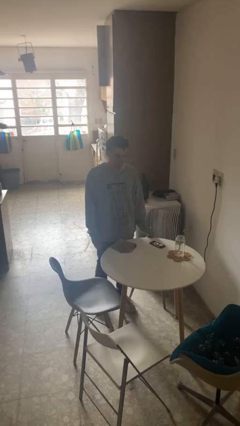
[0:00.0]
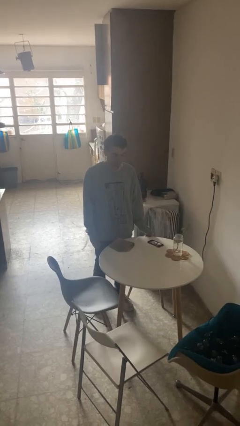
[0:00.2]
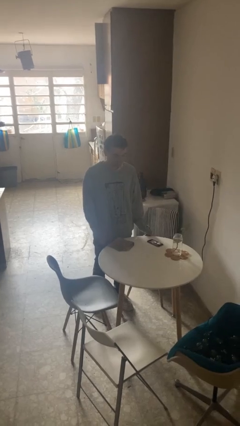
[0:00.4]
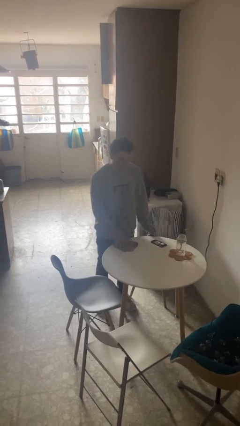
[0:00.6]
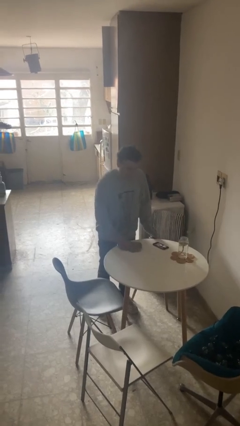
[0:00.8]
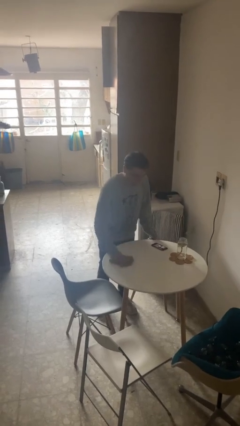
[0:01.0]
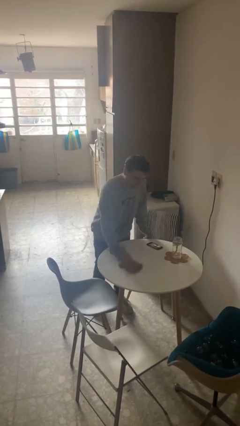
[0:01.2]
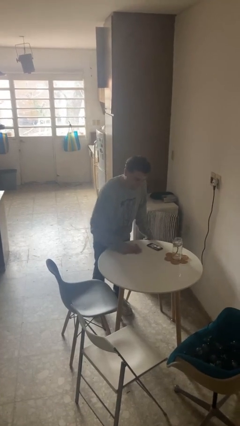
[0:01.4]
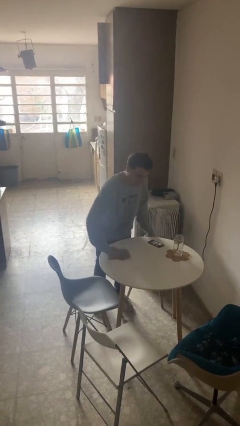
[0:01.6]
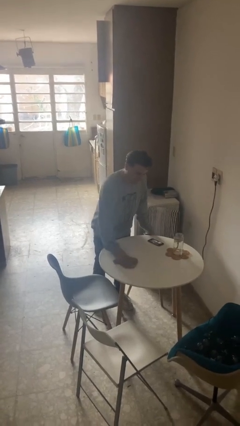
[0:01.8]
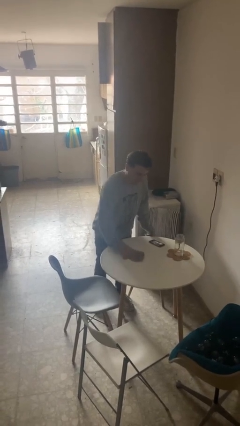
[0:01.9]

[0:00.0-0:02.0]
person cleans table with rag

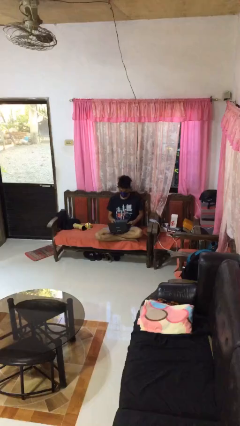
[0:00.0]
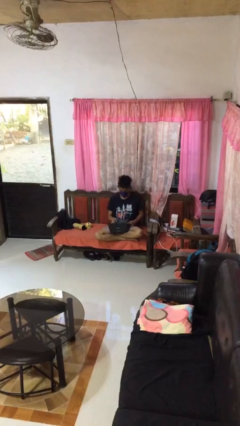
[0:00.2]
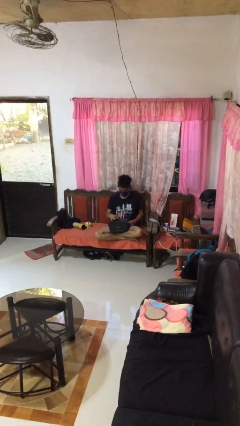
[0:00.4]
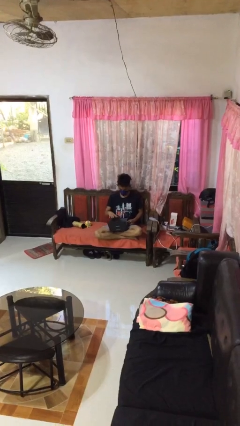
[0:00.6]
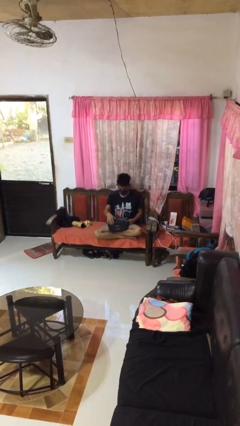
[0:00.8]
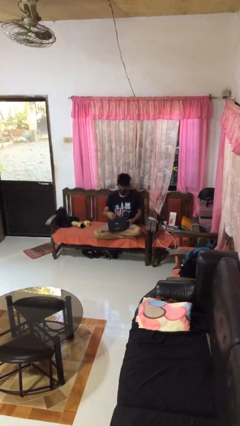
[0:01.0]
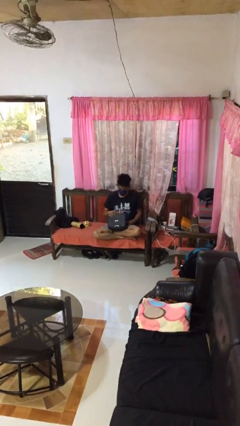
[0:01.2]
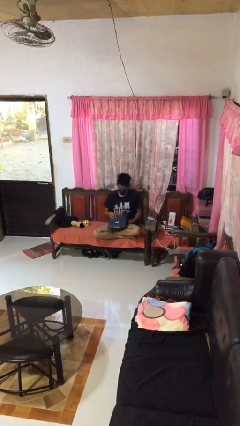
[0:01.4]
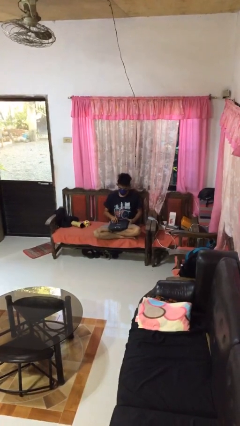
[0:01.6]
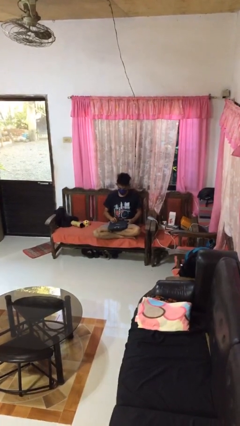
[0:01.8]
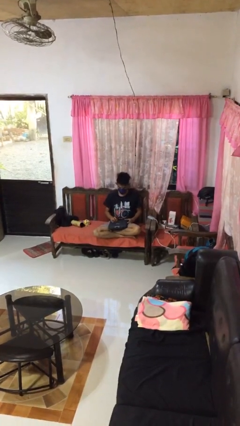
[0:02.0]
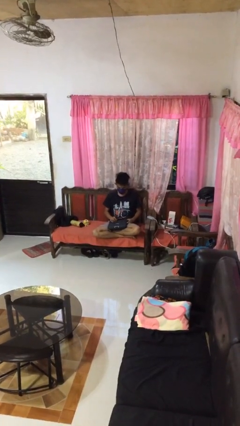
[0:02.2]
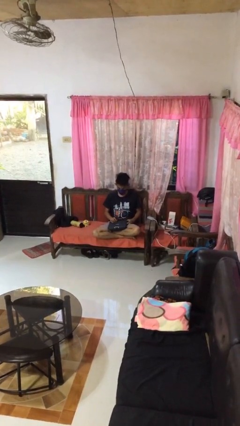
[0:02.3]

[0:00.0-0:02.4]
person closes laptop

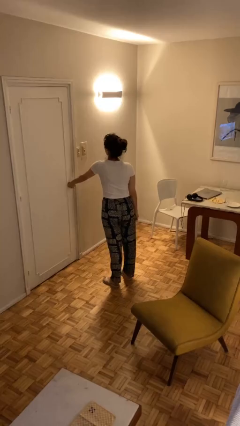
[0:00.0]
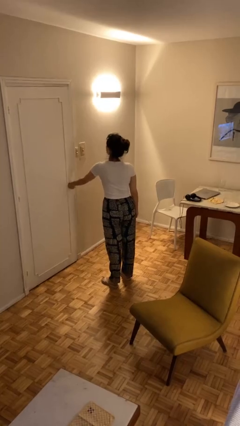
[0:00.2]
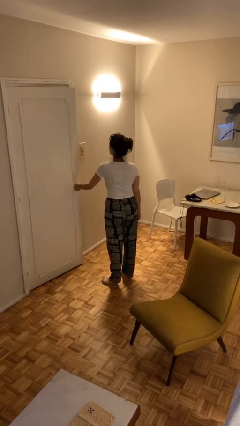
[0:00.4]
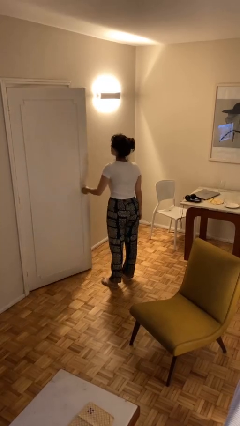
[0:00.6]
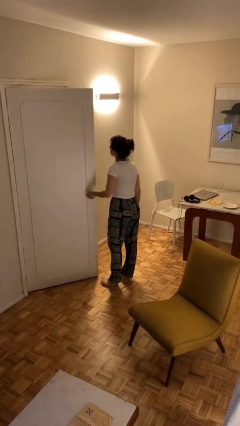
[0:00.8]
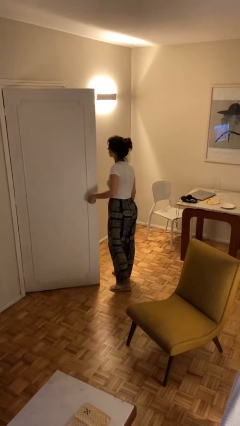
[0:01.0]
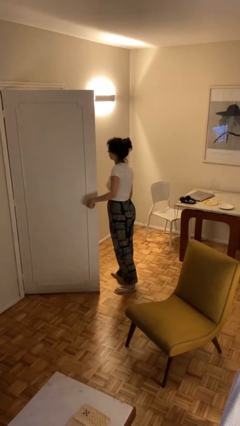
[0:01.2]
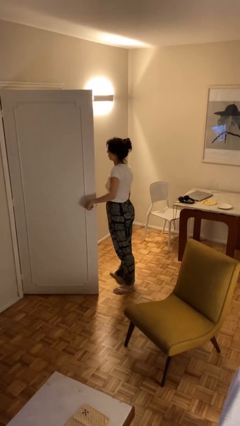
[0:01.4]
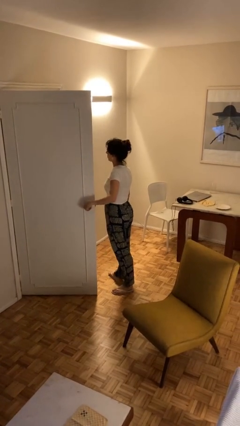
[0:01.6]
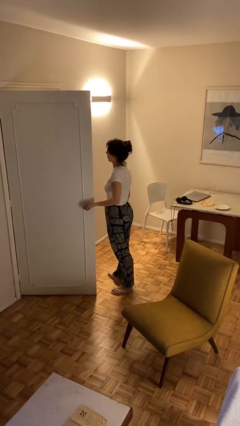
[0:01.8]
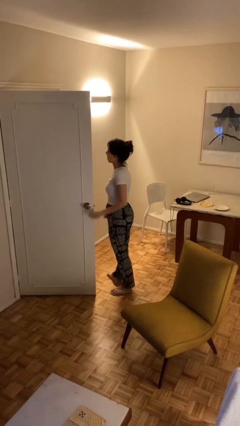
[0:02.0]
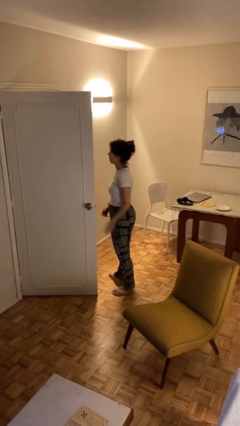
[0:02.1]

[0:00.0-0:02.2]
person opens facility door

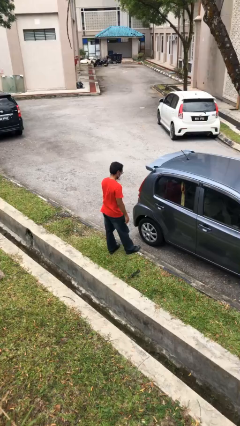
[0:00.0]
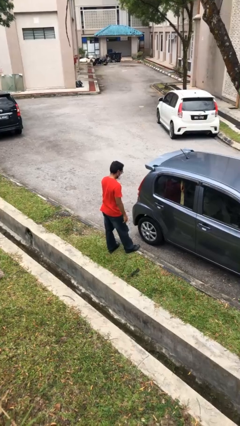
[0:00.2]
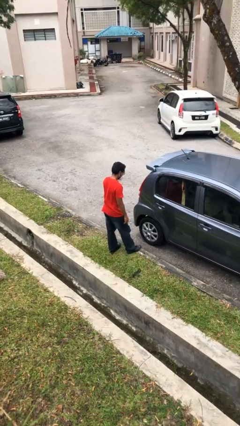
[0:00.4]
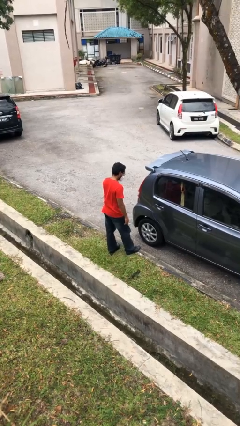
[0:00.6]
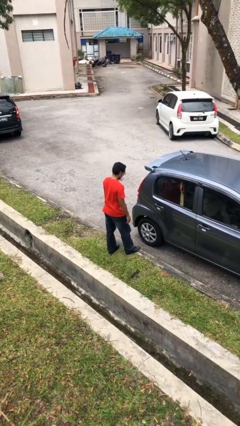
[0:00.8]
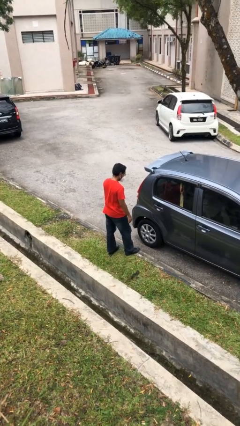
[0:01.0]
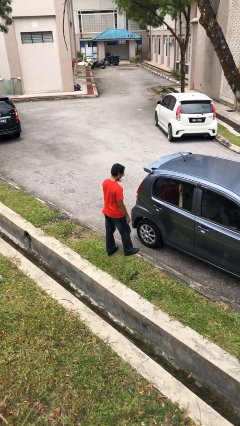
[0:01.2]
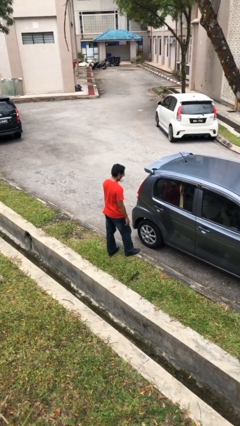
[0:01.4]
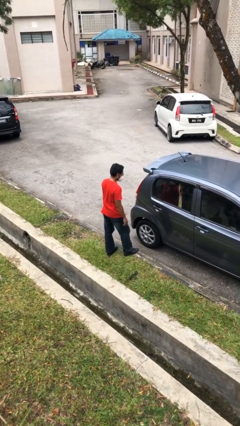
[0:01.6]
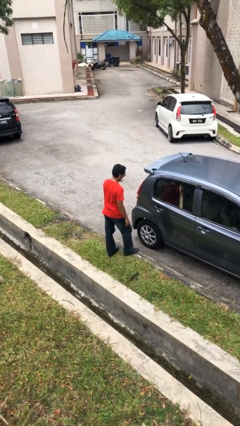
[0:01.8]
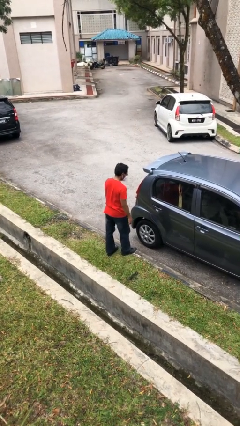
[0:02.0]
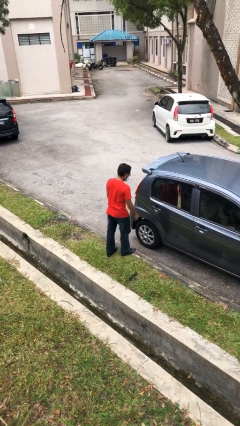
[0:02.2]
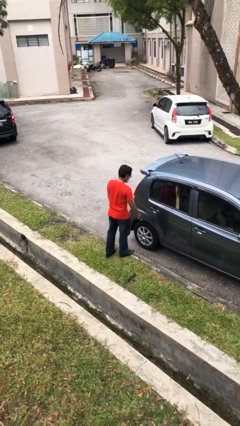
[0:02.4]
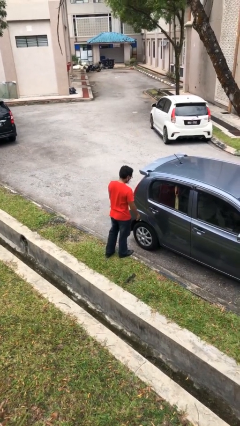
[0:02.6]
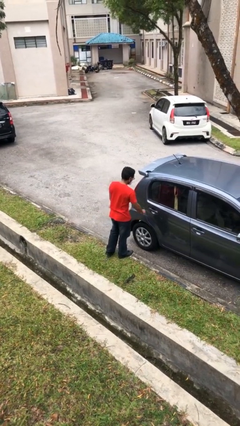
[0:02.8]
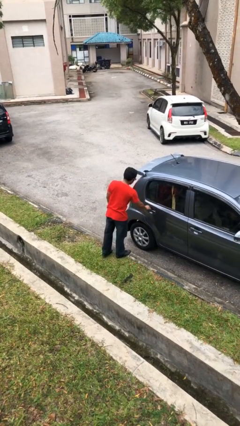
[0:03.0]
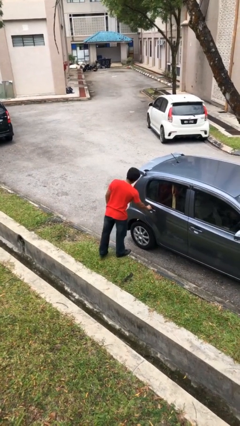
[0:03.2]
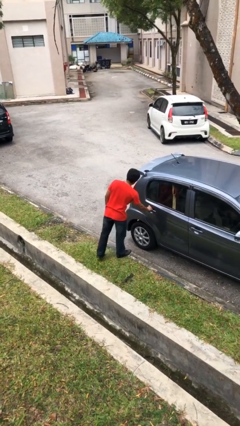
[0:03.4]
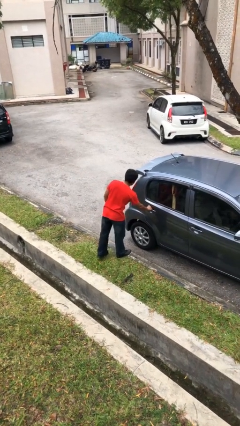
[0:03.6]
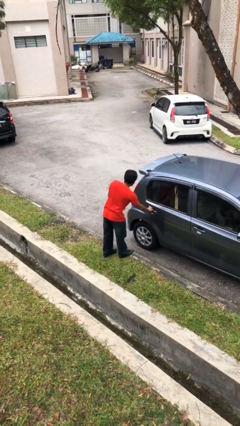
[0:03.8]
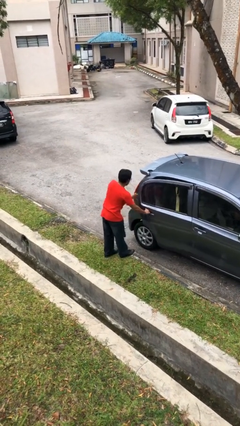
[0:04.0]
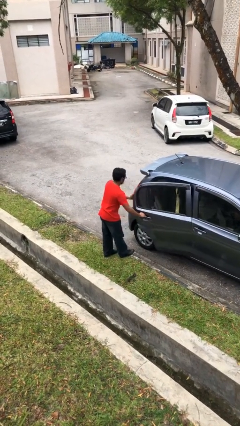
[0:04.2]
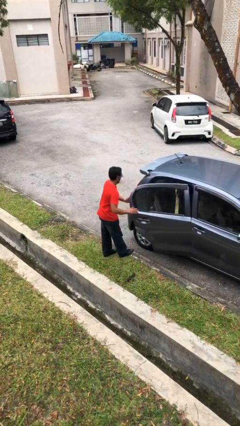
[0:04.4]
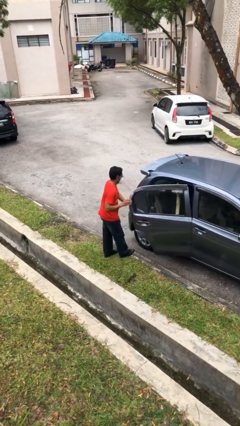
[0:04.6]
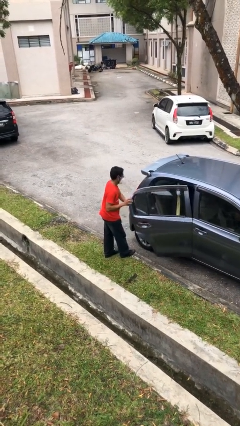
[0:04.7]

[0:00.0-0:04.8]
person opens car door

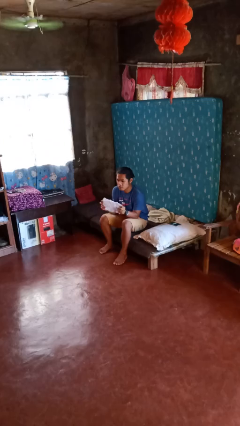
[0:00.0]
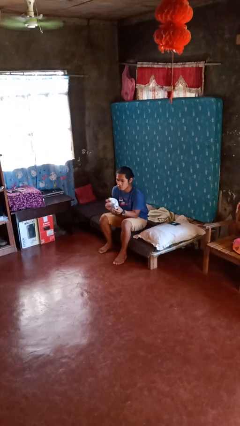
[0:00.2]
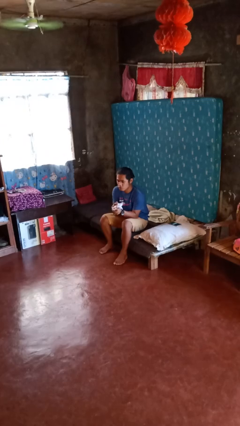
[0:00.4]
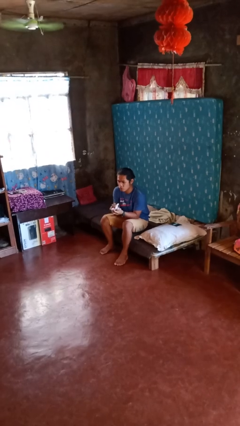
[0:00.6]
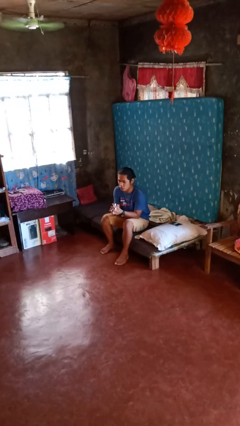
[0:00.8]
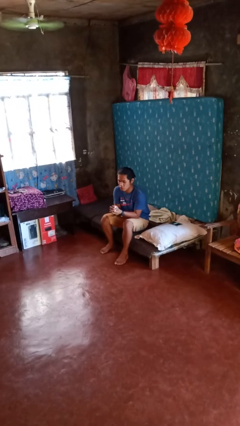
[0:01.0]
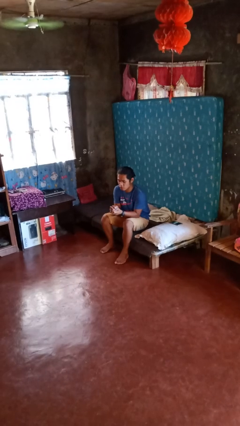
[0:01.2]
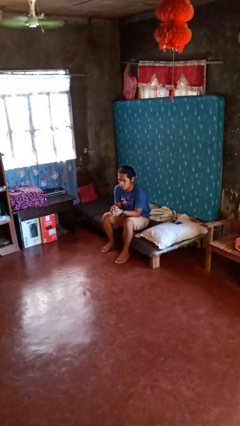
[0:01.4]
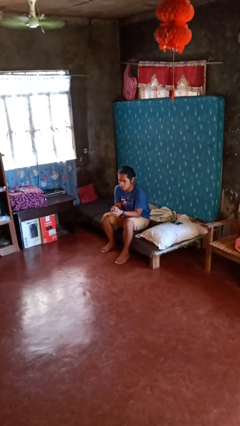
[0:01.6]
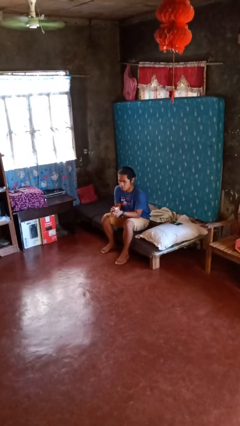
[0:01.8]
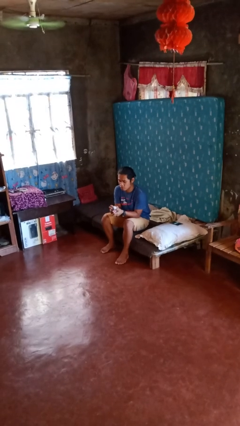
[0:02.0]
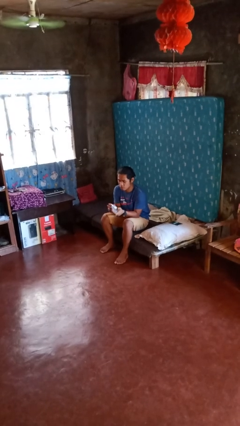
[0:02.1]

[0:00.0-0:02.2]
person crumples paper

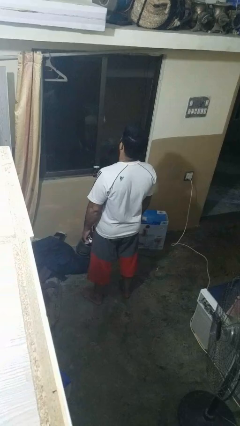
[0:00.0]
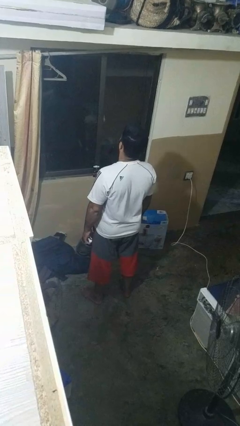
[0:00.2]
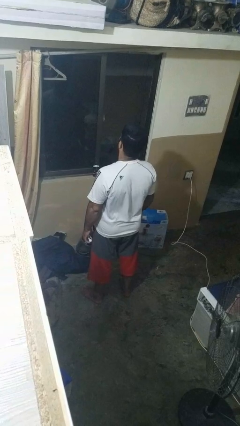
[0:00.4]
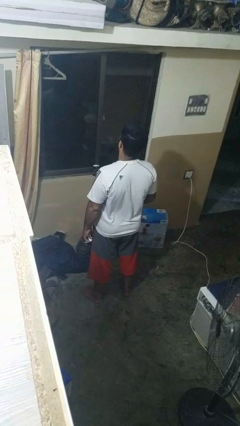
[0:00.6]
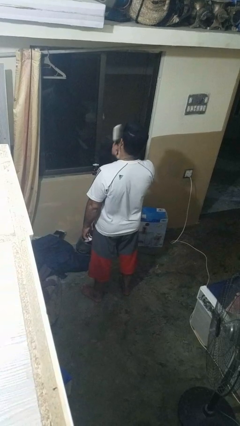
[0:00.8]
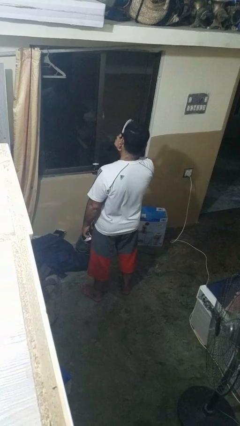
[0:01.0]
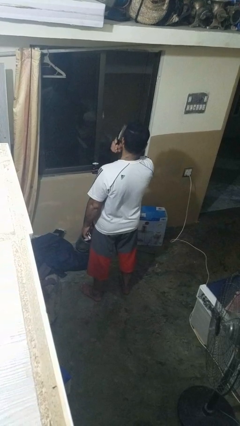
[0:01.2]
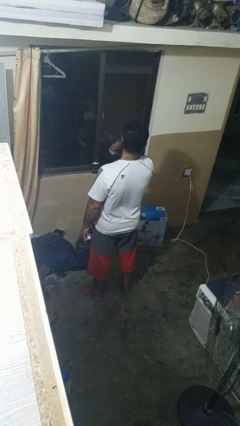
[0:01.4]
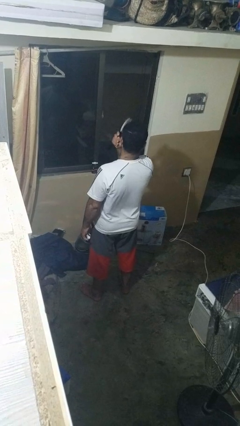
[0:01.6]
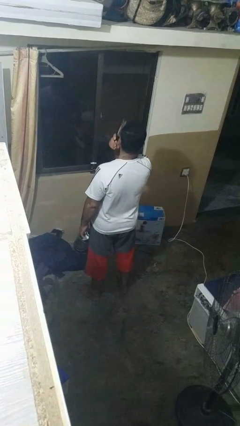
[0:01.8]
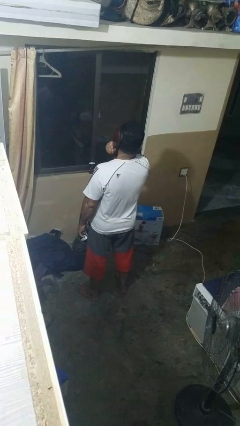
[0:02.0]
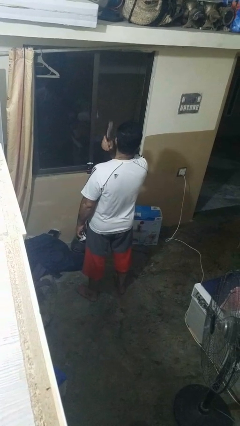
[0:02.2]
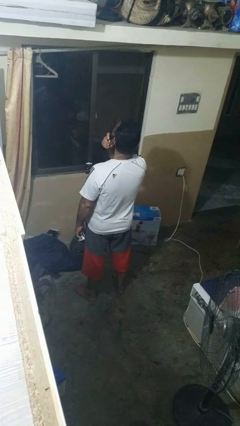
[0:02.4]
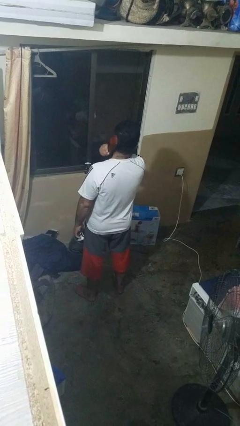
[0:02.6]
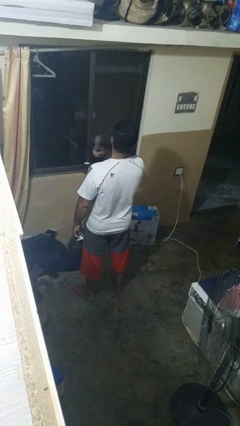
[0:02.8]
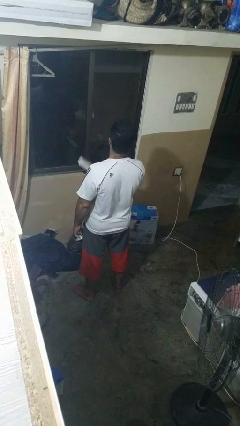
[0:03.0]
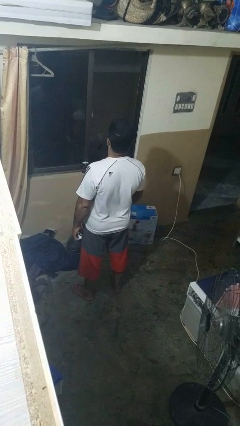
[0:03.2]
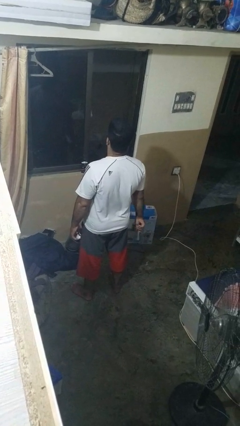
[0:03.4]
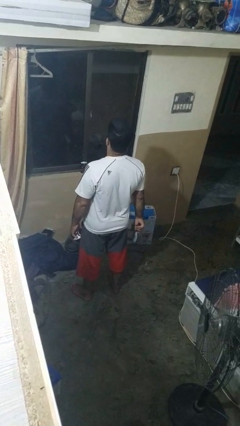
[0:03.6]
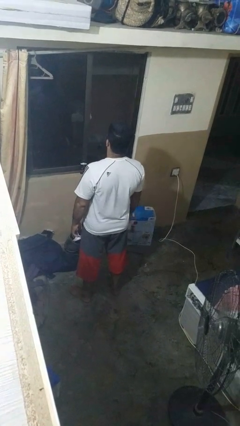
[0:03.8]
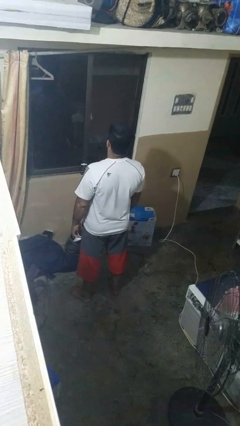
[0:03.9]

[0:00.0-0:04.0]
person brushes hair
